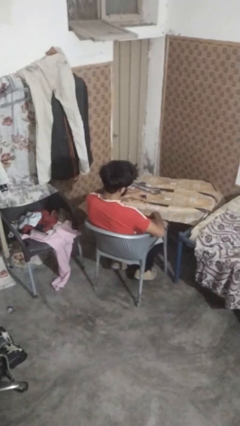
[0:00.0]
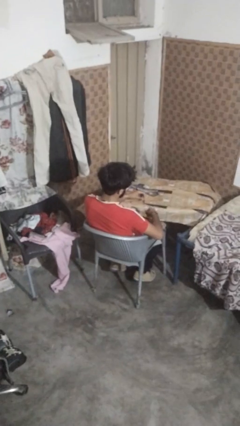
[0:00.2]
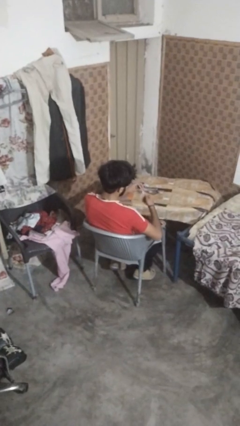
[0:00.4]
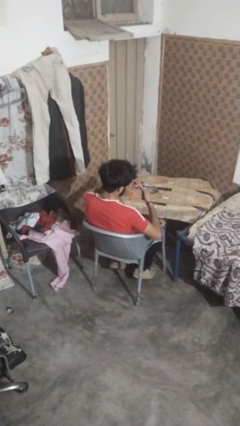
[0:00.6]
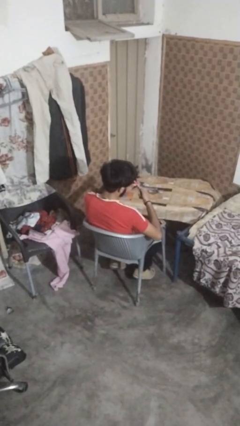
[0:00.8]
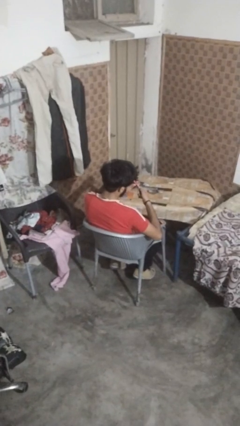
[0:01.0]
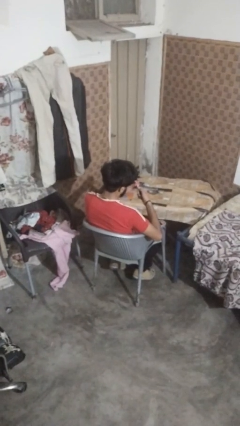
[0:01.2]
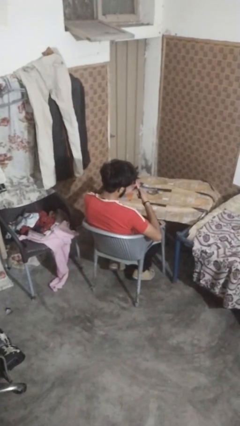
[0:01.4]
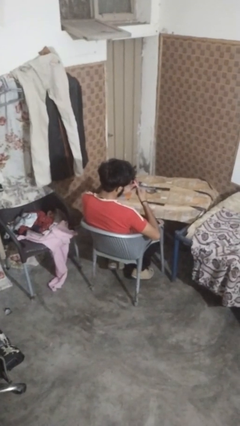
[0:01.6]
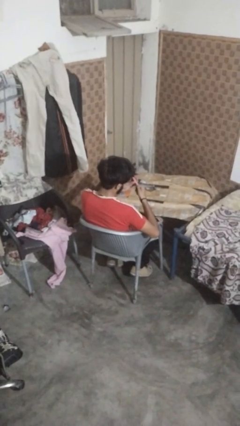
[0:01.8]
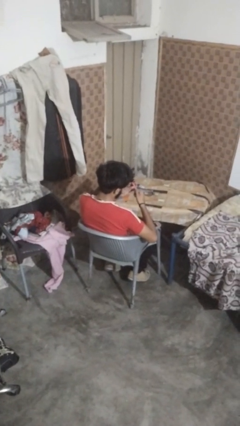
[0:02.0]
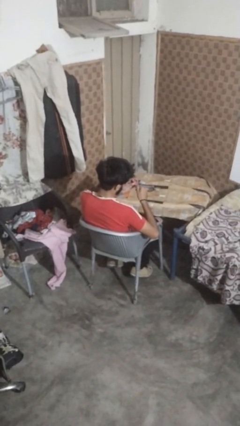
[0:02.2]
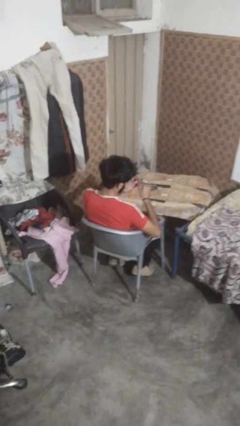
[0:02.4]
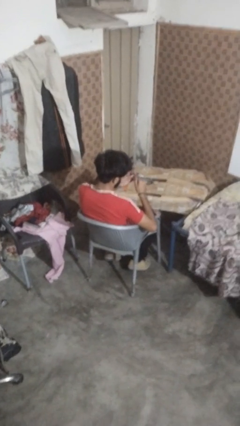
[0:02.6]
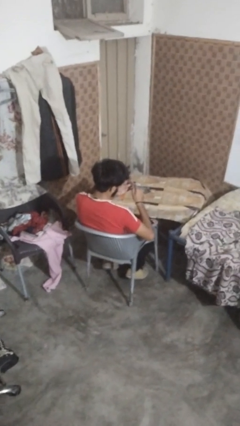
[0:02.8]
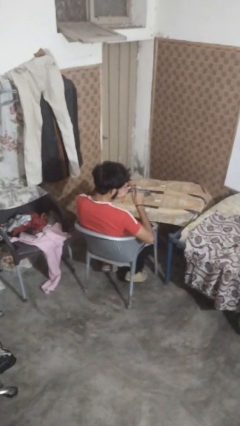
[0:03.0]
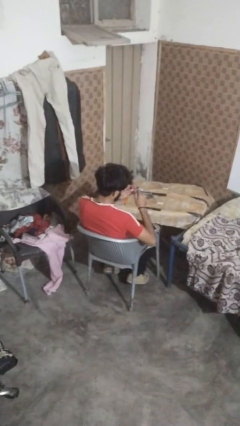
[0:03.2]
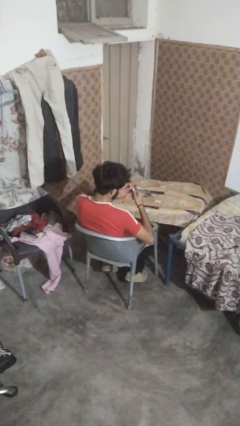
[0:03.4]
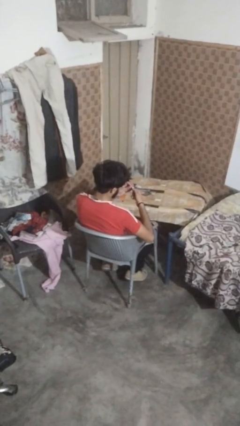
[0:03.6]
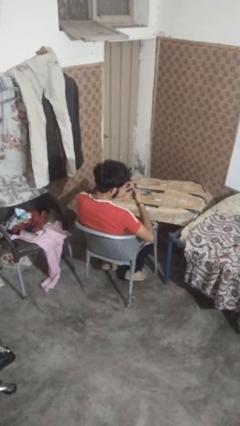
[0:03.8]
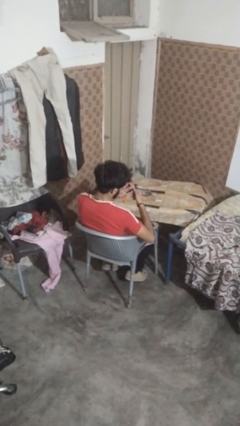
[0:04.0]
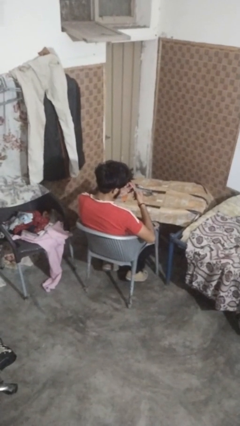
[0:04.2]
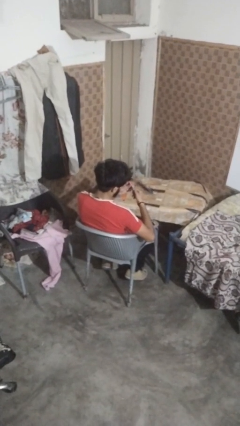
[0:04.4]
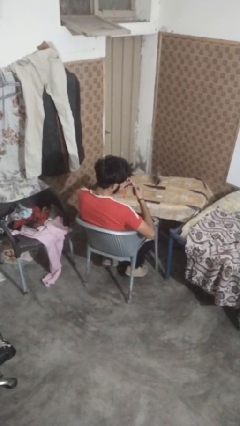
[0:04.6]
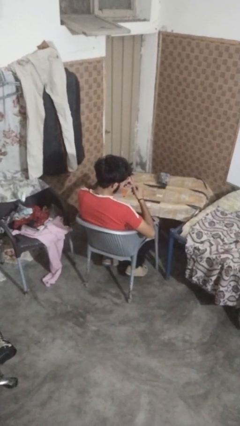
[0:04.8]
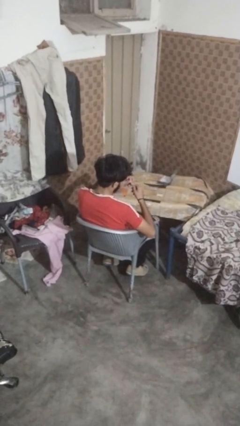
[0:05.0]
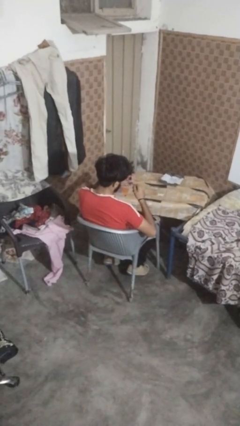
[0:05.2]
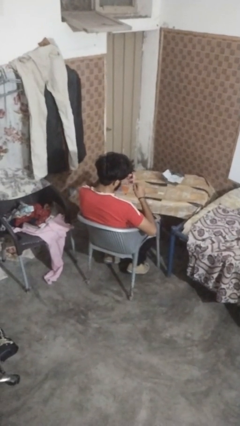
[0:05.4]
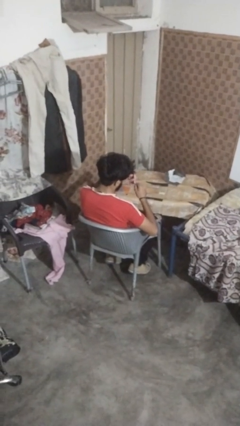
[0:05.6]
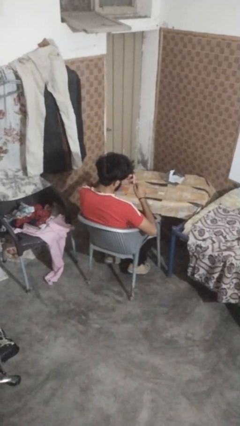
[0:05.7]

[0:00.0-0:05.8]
person clips fingernails

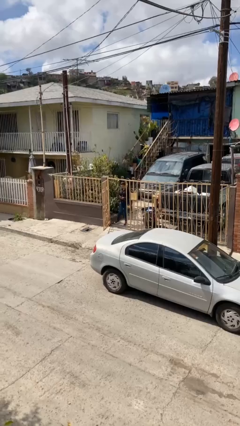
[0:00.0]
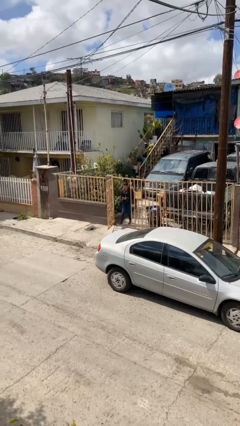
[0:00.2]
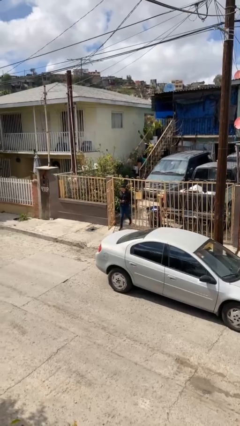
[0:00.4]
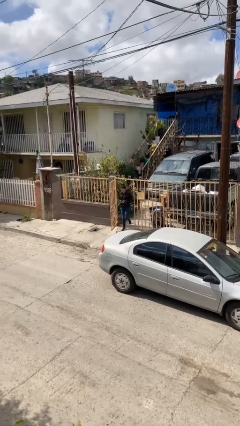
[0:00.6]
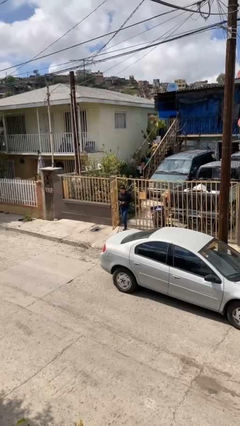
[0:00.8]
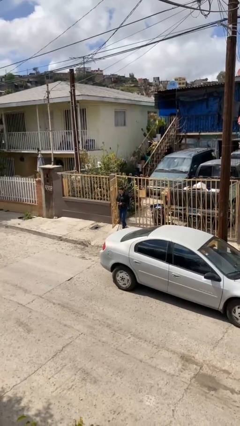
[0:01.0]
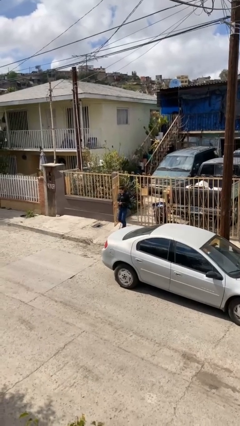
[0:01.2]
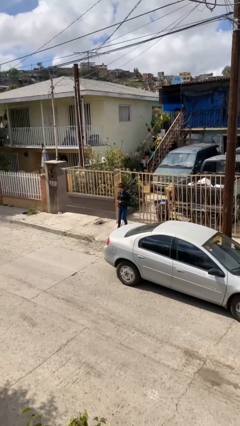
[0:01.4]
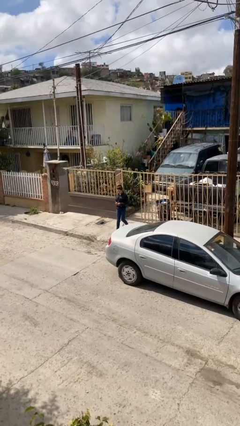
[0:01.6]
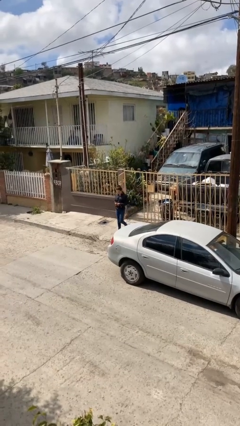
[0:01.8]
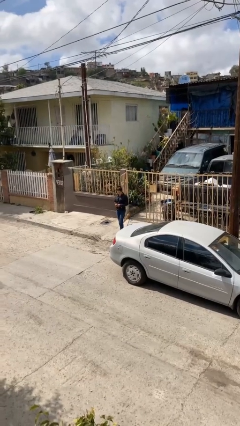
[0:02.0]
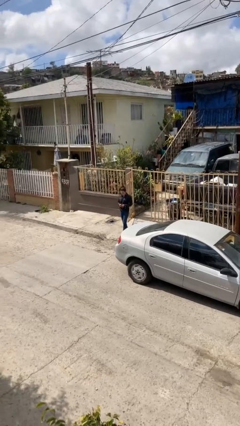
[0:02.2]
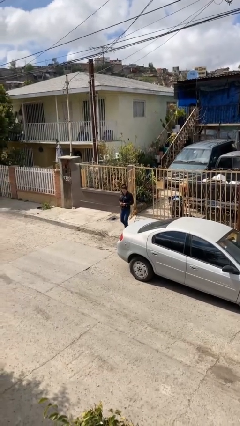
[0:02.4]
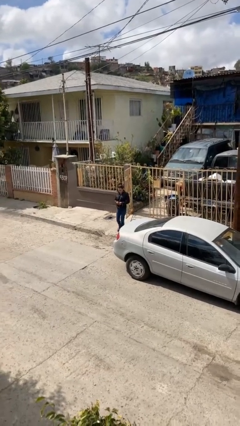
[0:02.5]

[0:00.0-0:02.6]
person enters scene through structure

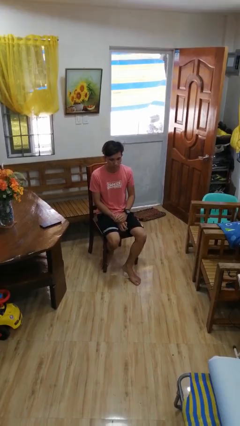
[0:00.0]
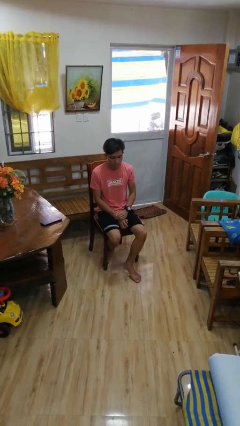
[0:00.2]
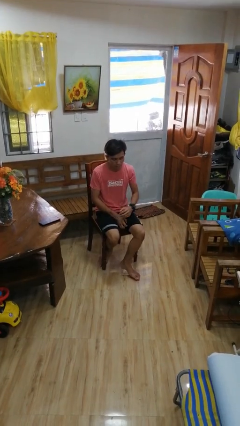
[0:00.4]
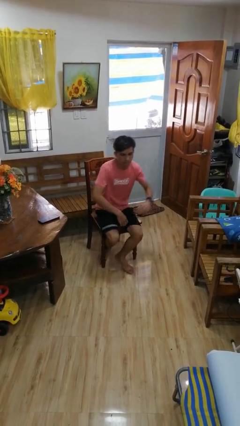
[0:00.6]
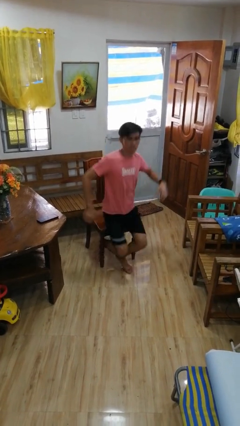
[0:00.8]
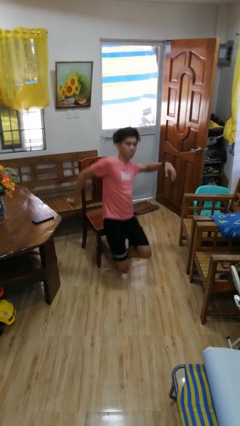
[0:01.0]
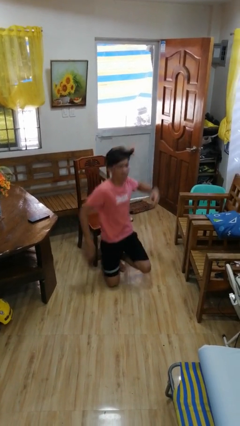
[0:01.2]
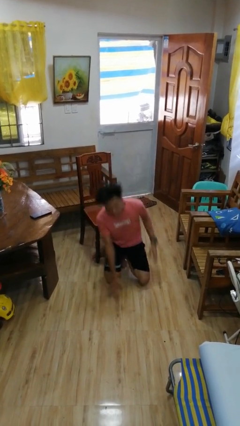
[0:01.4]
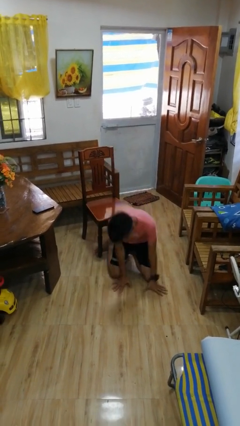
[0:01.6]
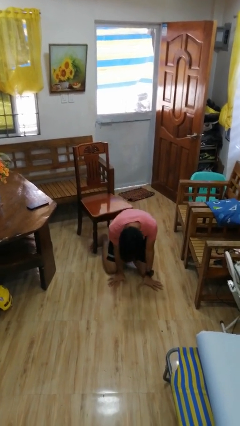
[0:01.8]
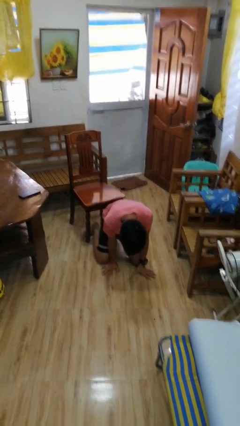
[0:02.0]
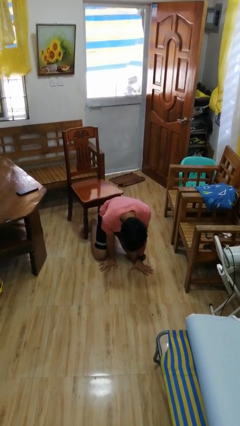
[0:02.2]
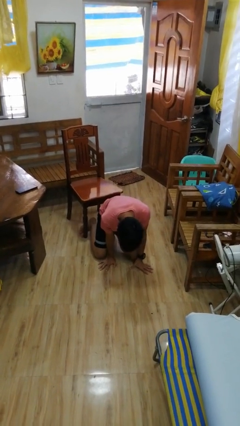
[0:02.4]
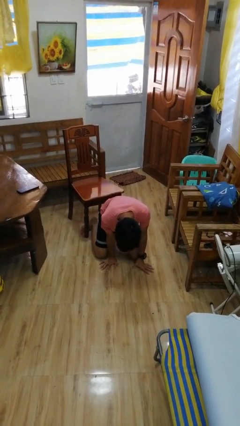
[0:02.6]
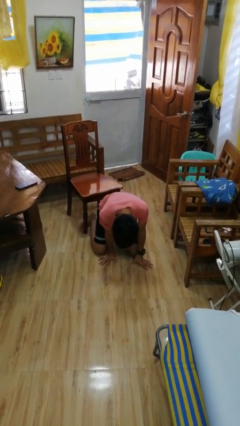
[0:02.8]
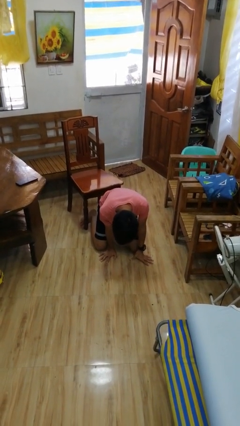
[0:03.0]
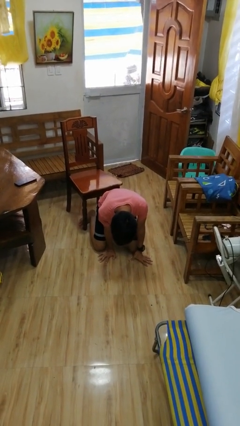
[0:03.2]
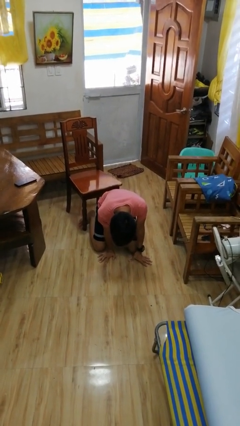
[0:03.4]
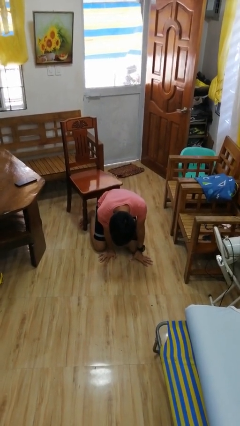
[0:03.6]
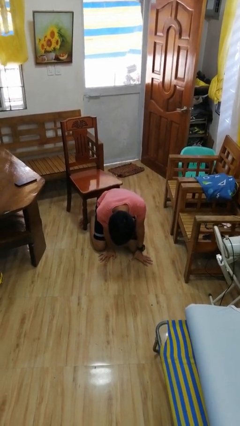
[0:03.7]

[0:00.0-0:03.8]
person falls from chair

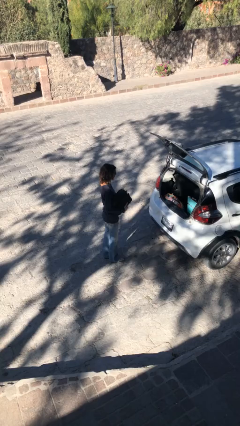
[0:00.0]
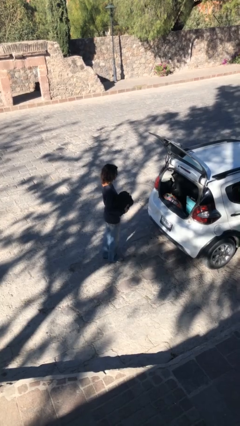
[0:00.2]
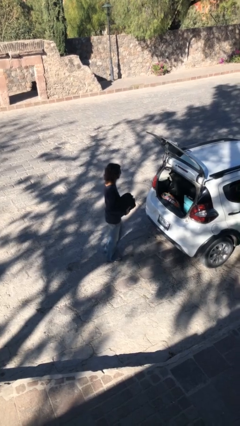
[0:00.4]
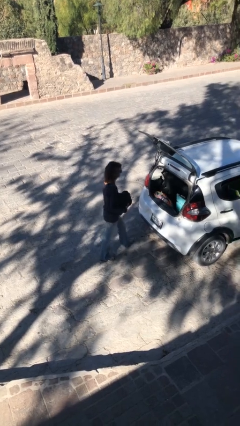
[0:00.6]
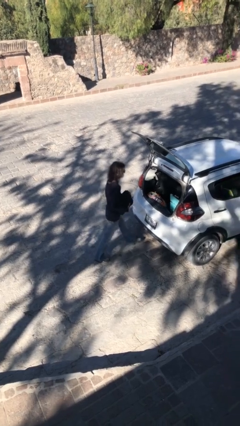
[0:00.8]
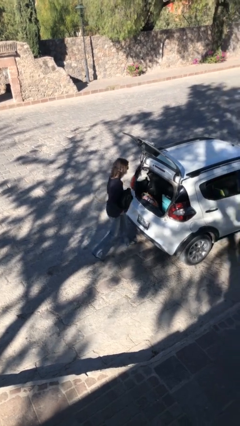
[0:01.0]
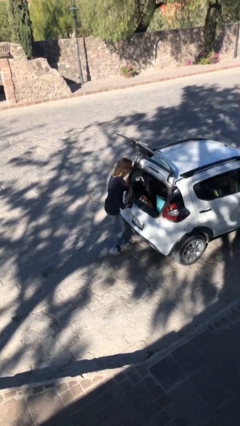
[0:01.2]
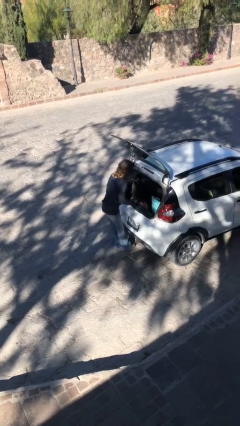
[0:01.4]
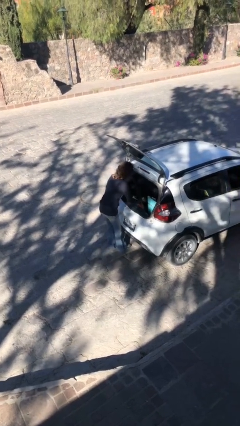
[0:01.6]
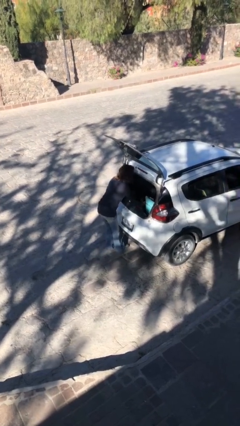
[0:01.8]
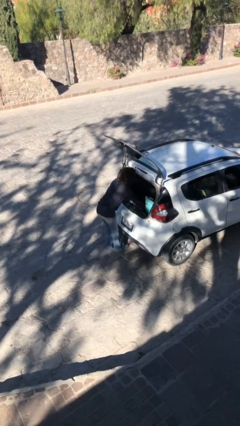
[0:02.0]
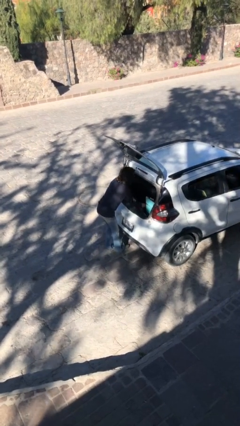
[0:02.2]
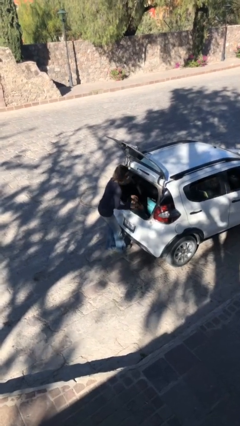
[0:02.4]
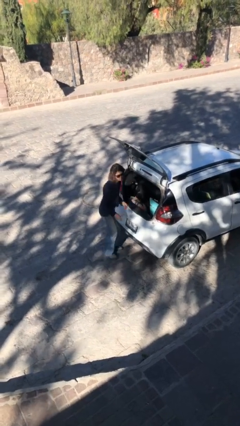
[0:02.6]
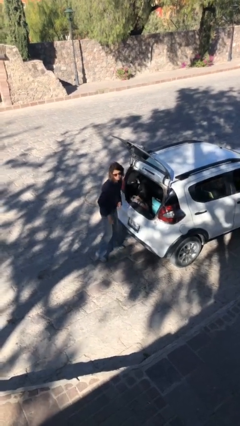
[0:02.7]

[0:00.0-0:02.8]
person loads car

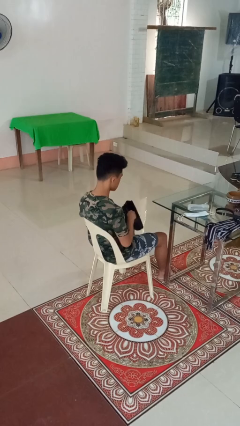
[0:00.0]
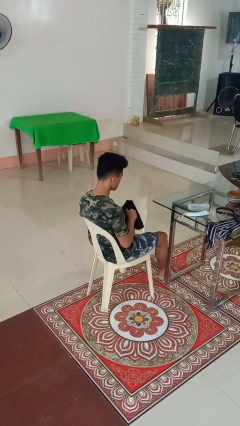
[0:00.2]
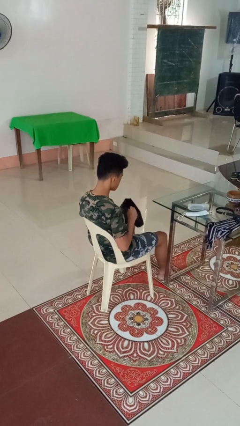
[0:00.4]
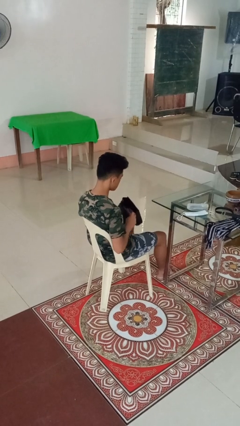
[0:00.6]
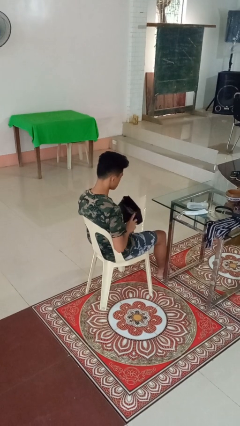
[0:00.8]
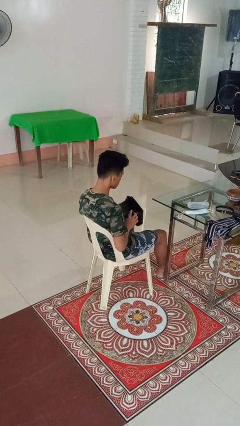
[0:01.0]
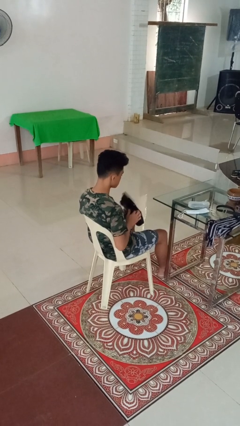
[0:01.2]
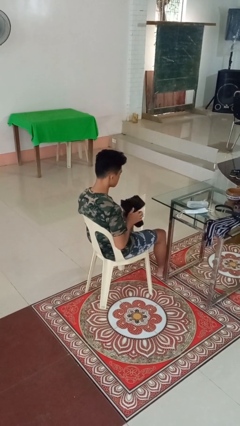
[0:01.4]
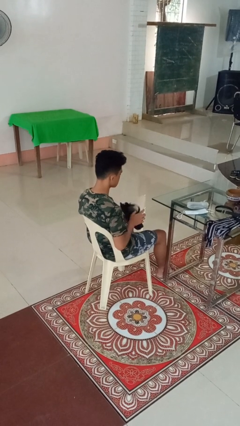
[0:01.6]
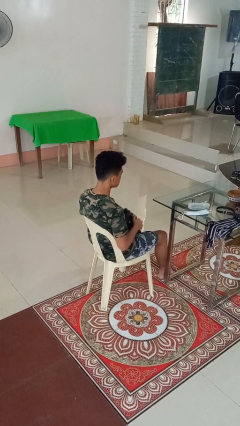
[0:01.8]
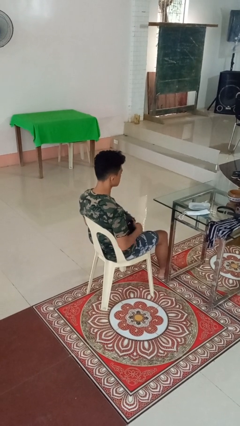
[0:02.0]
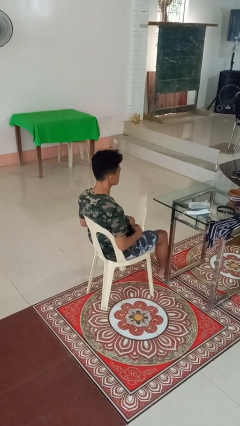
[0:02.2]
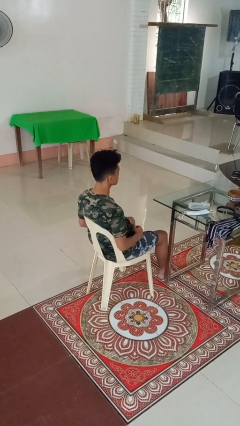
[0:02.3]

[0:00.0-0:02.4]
person puts object into purse
